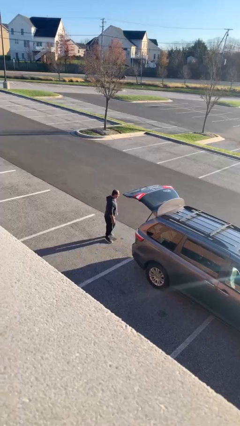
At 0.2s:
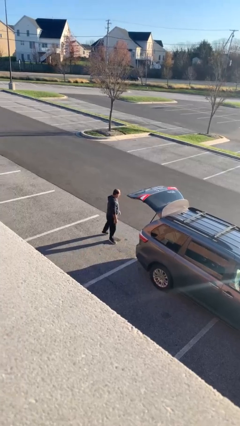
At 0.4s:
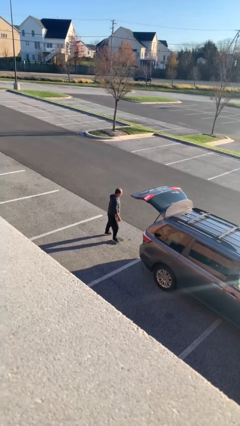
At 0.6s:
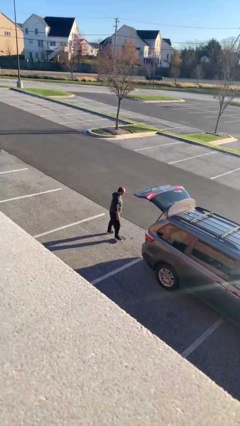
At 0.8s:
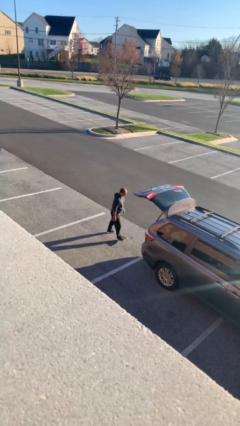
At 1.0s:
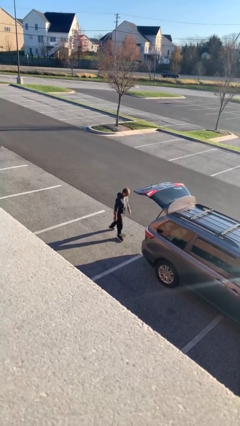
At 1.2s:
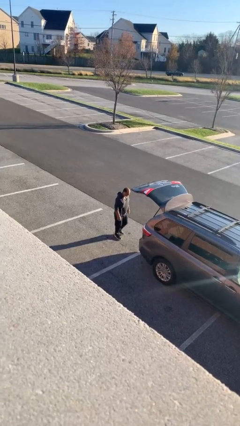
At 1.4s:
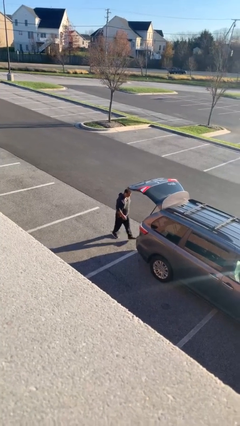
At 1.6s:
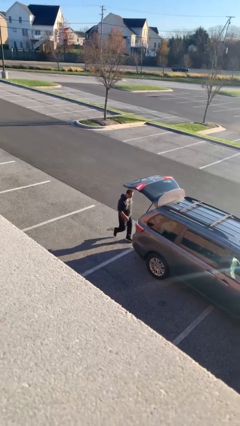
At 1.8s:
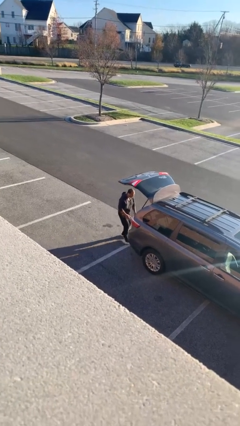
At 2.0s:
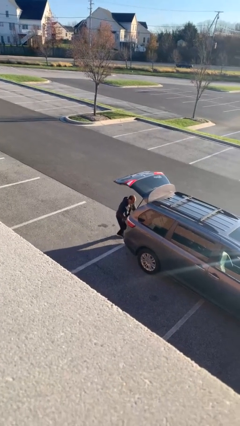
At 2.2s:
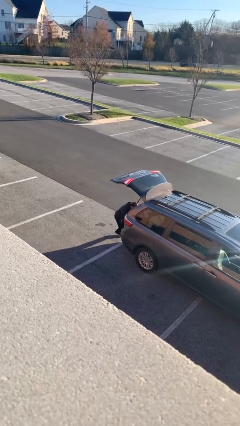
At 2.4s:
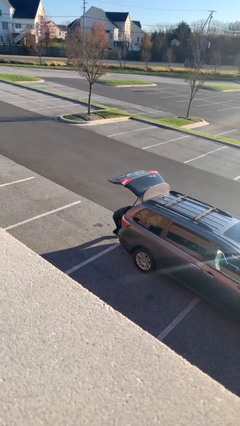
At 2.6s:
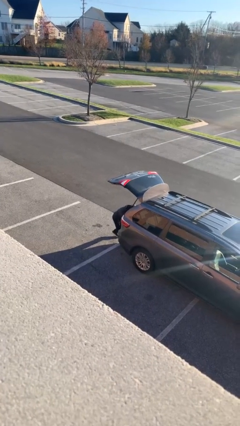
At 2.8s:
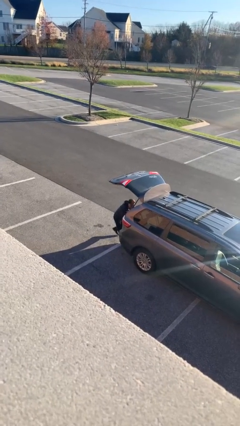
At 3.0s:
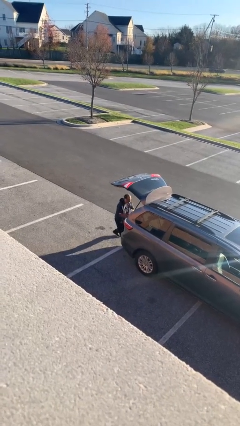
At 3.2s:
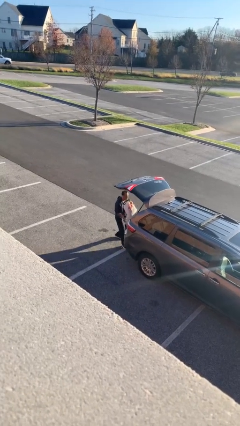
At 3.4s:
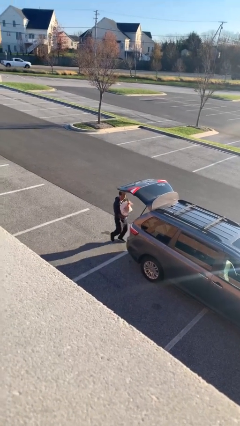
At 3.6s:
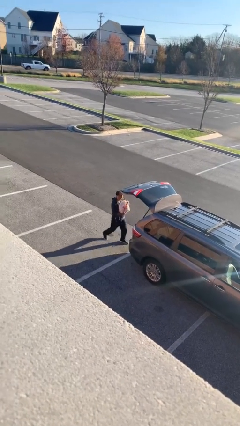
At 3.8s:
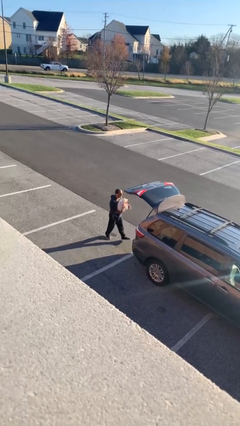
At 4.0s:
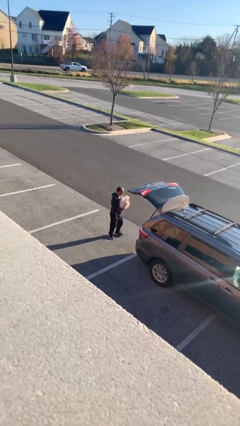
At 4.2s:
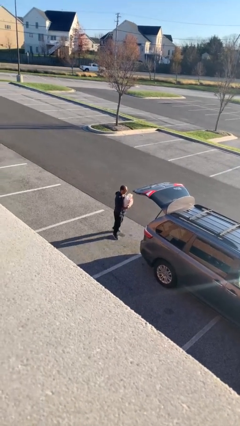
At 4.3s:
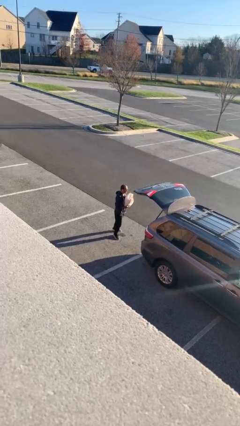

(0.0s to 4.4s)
person unloads car

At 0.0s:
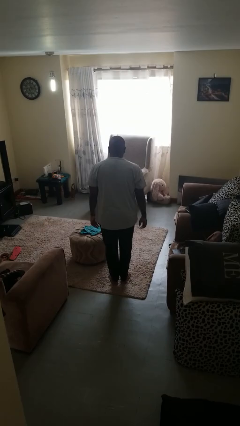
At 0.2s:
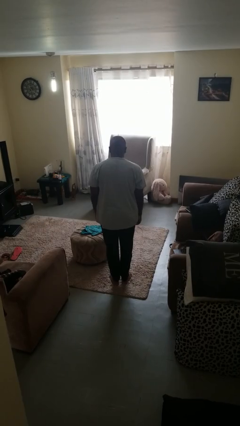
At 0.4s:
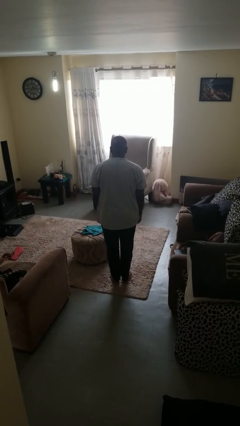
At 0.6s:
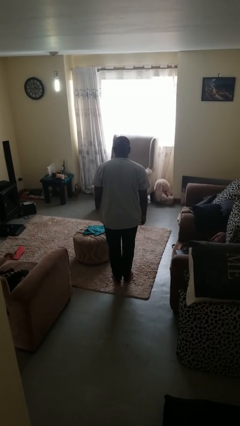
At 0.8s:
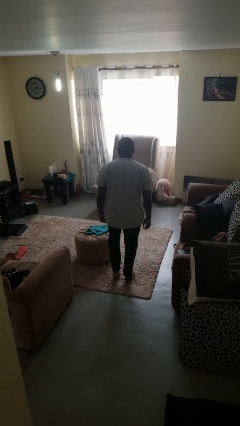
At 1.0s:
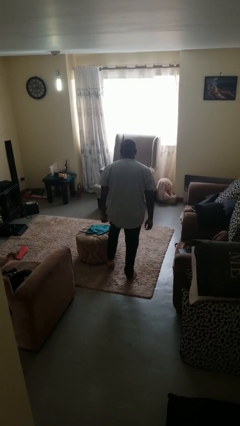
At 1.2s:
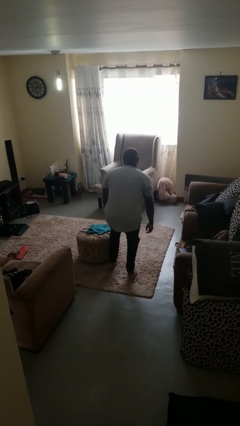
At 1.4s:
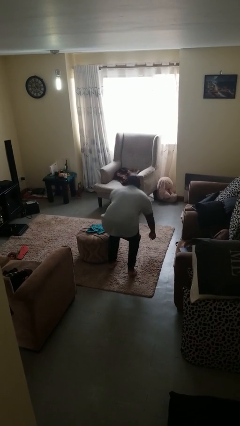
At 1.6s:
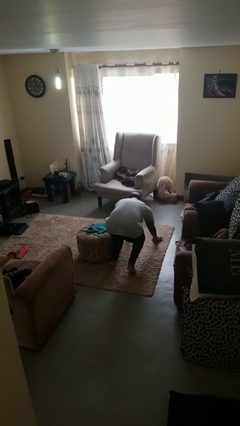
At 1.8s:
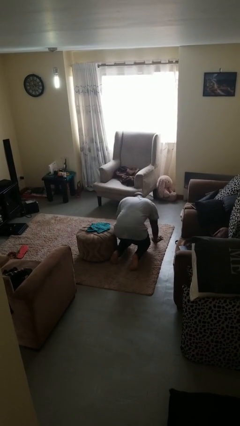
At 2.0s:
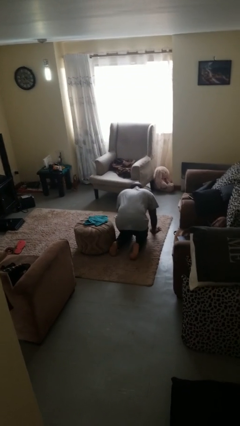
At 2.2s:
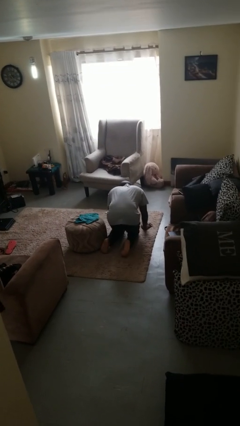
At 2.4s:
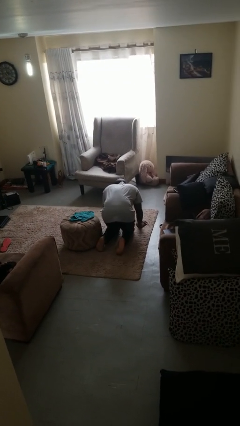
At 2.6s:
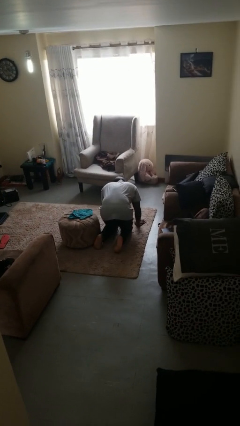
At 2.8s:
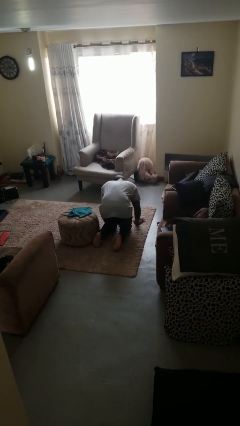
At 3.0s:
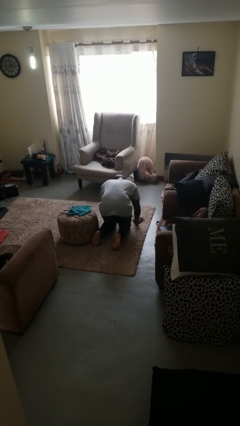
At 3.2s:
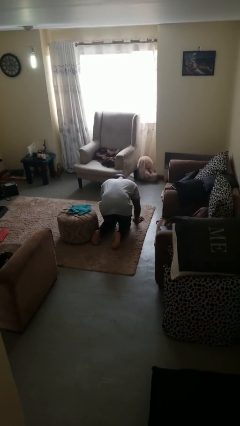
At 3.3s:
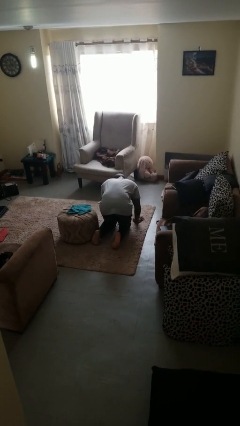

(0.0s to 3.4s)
person trips on object on floor

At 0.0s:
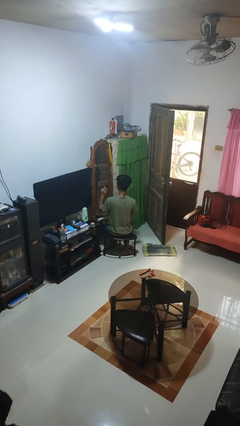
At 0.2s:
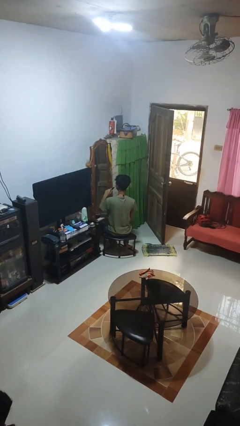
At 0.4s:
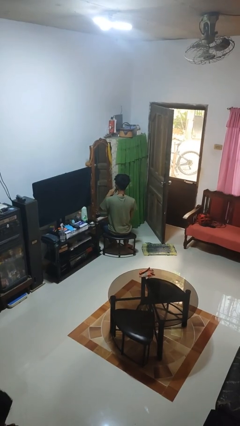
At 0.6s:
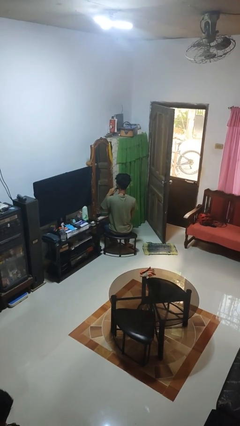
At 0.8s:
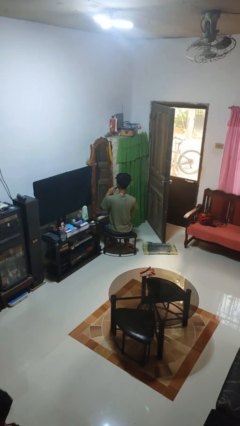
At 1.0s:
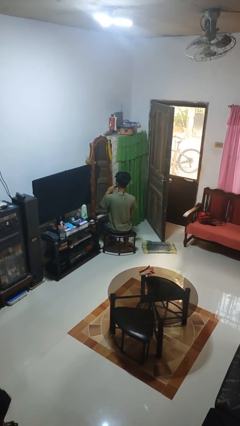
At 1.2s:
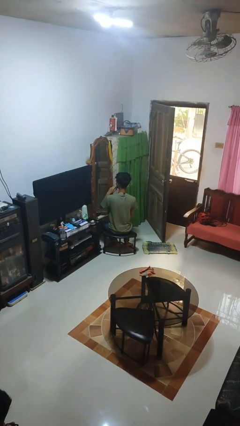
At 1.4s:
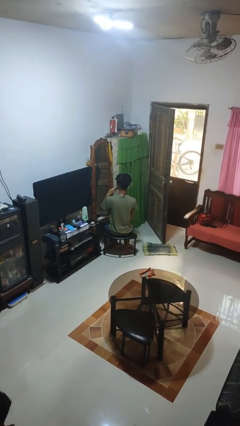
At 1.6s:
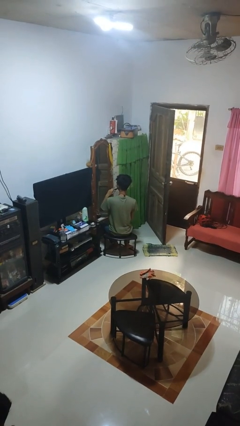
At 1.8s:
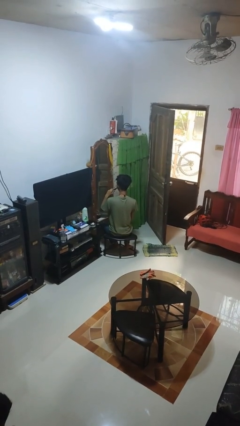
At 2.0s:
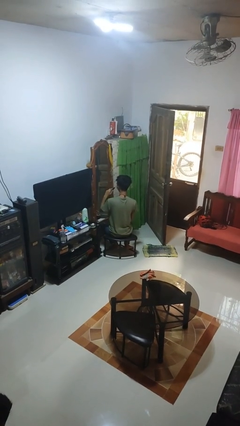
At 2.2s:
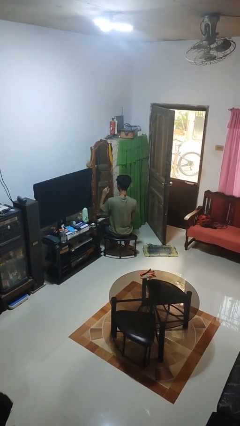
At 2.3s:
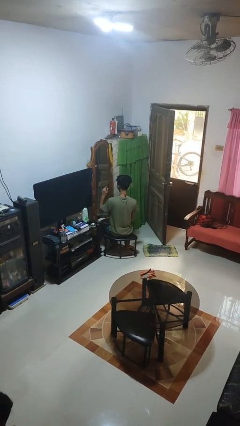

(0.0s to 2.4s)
person applies lip makeup

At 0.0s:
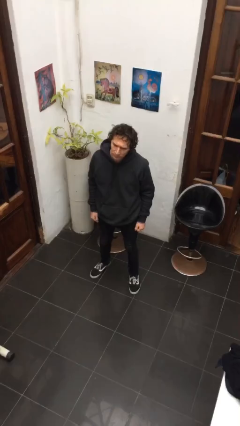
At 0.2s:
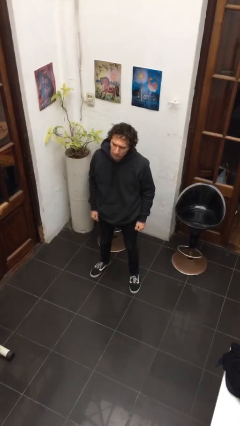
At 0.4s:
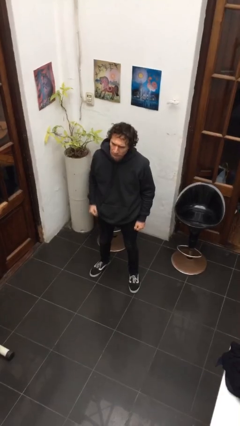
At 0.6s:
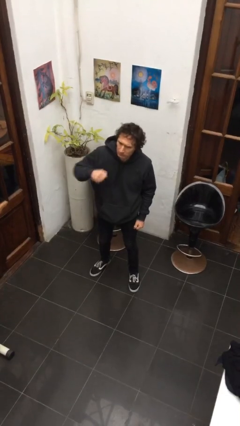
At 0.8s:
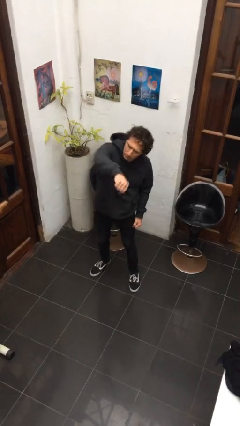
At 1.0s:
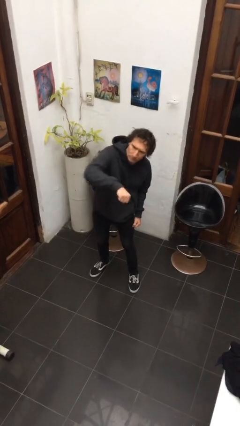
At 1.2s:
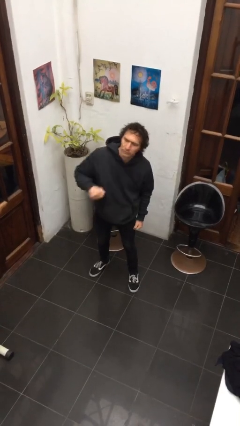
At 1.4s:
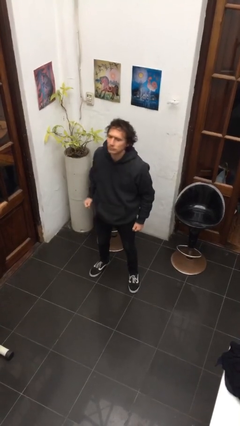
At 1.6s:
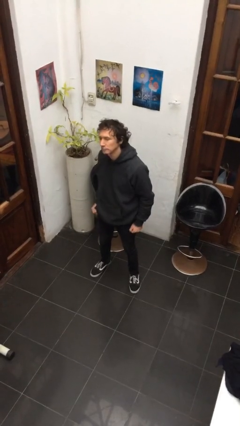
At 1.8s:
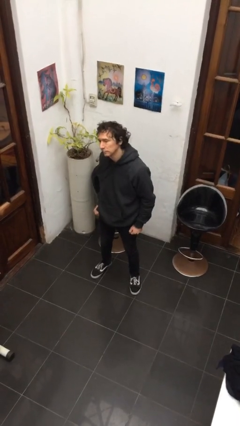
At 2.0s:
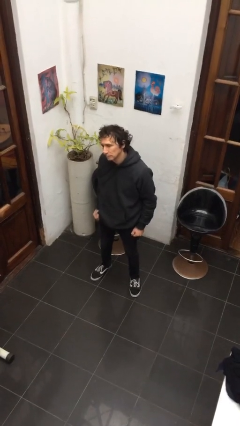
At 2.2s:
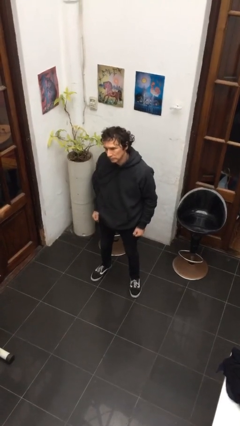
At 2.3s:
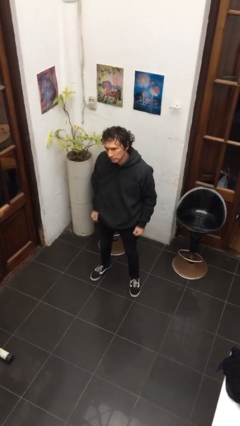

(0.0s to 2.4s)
person punches

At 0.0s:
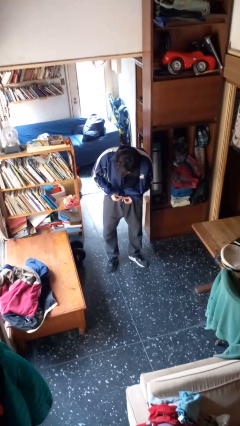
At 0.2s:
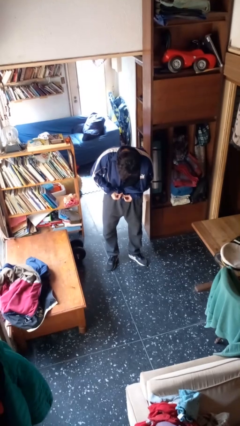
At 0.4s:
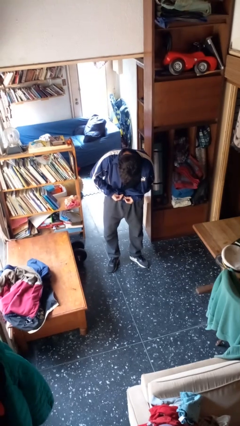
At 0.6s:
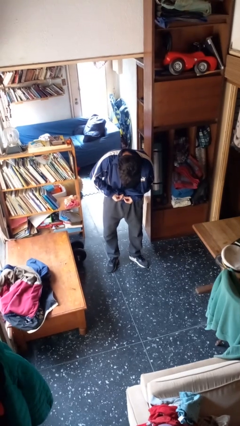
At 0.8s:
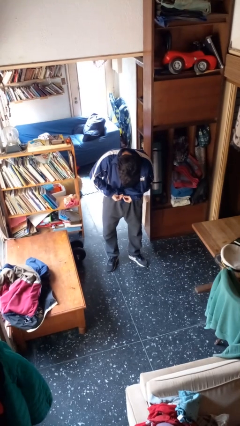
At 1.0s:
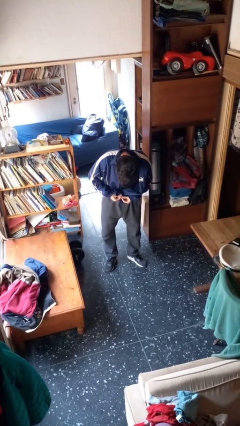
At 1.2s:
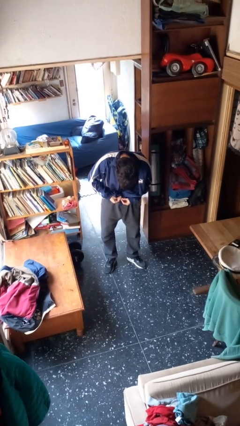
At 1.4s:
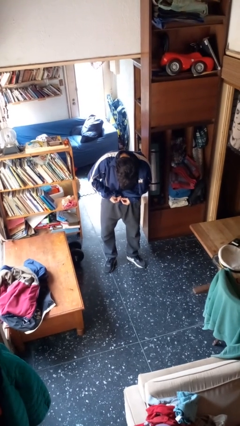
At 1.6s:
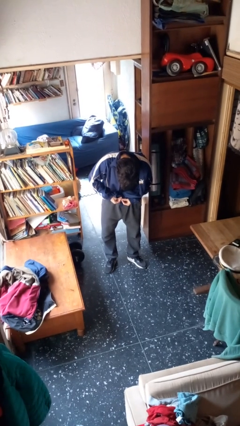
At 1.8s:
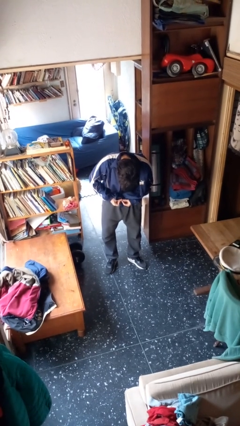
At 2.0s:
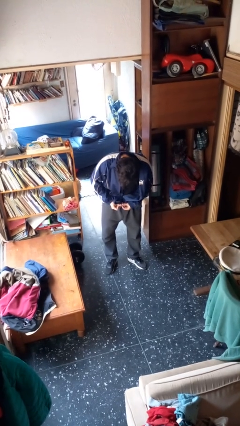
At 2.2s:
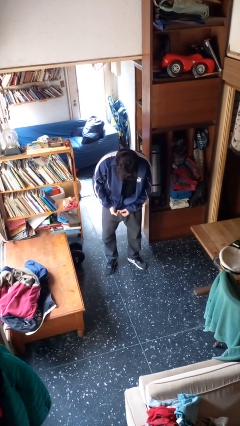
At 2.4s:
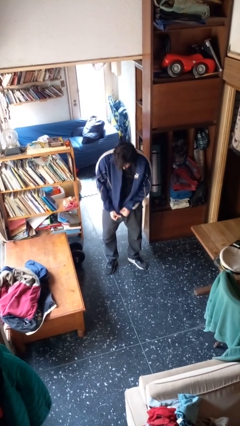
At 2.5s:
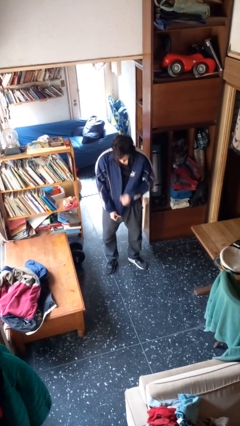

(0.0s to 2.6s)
person zips up jacket

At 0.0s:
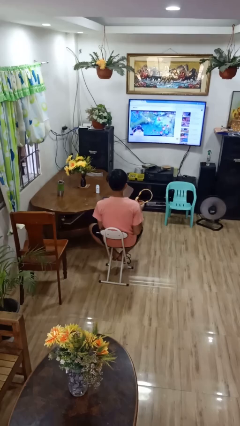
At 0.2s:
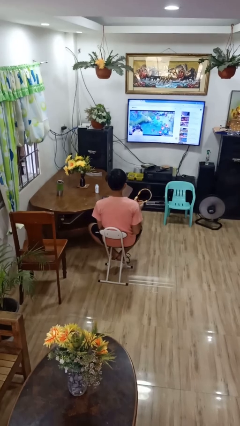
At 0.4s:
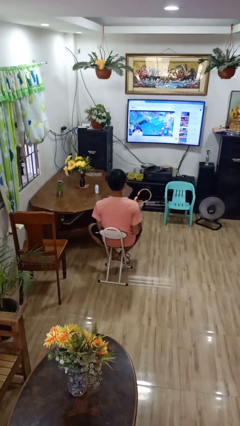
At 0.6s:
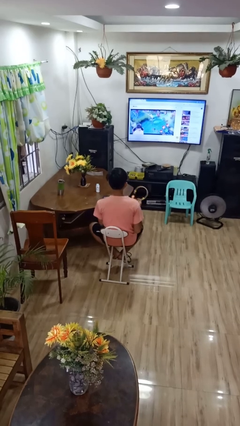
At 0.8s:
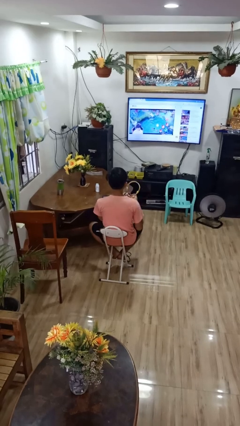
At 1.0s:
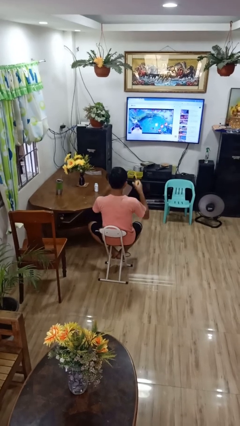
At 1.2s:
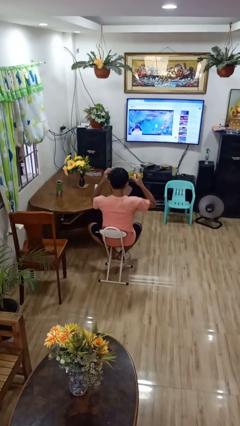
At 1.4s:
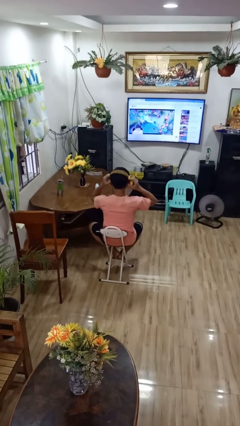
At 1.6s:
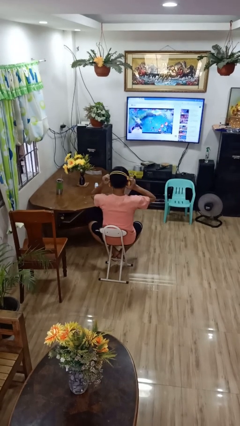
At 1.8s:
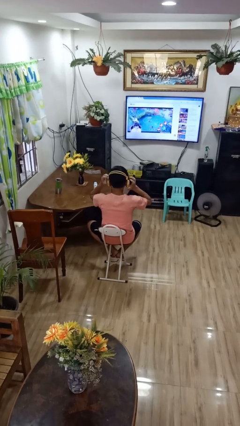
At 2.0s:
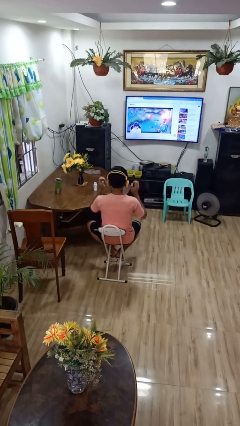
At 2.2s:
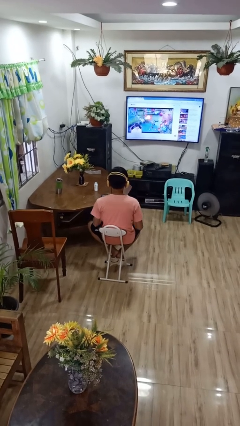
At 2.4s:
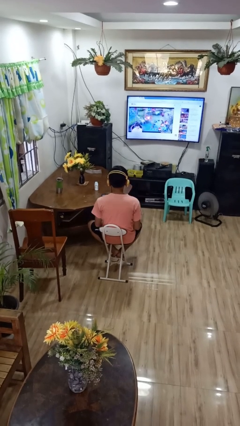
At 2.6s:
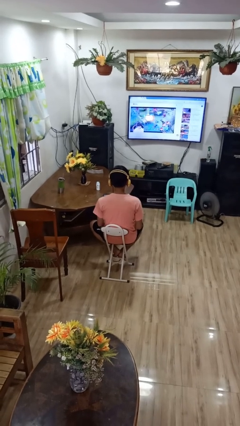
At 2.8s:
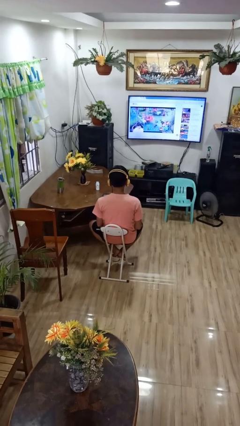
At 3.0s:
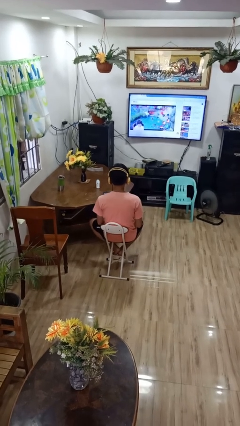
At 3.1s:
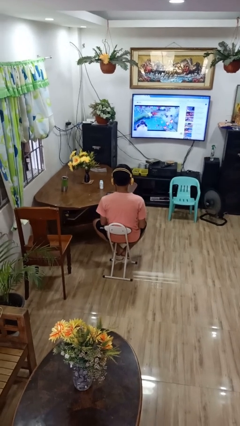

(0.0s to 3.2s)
person puts on headphones
